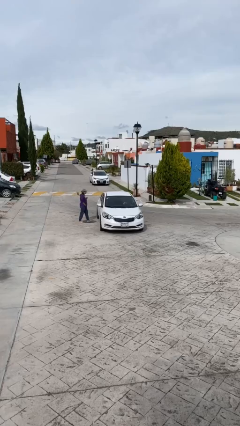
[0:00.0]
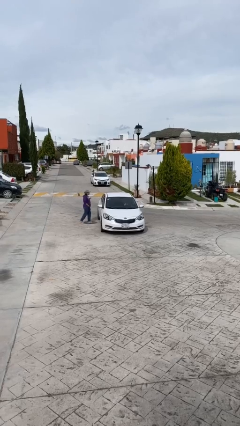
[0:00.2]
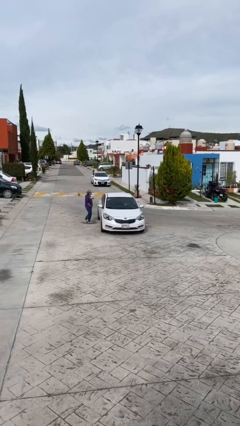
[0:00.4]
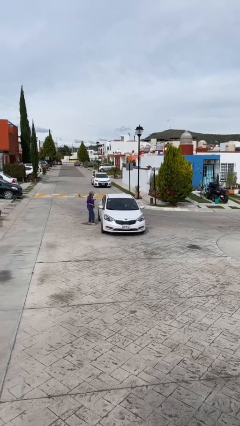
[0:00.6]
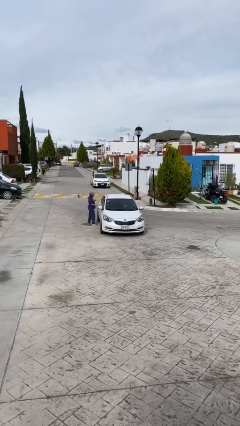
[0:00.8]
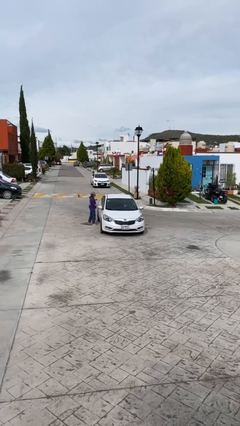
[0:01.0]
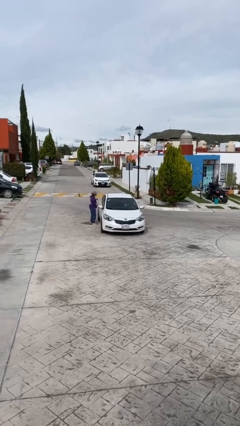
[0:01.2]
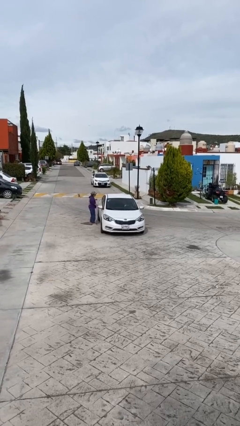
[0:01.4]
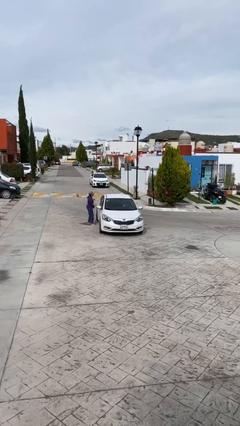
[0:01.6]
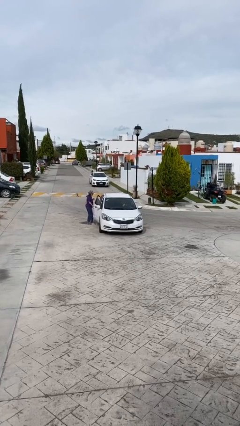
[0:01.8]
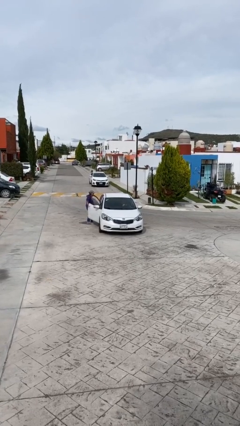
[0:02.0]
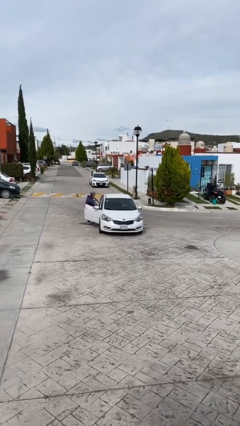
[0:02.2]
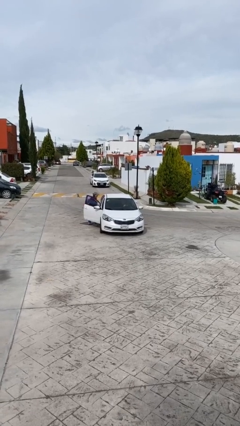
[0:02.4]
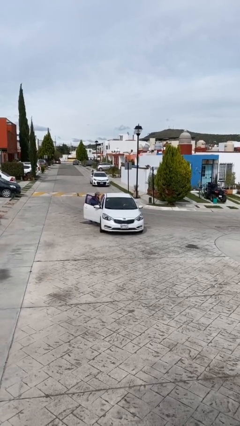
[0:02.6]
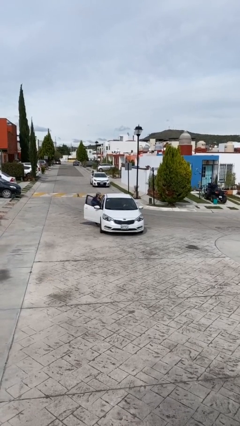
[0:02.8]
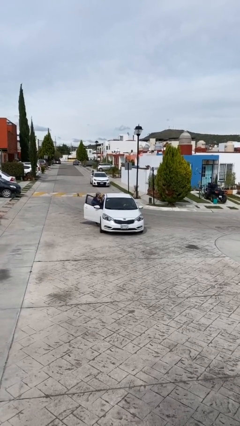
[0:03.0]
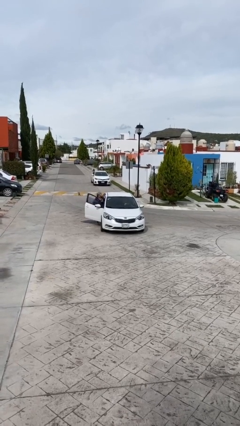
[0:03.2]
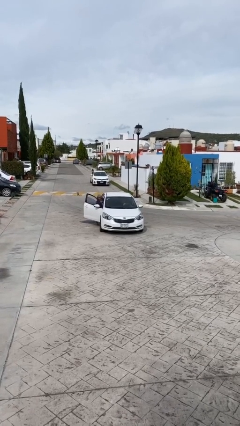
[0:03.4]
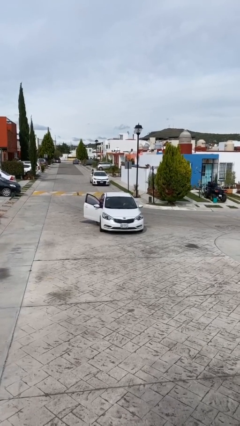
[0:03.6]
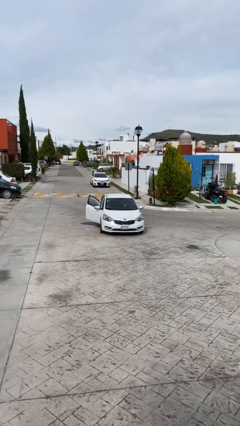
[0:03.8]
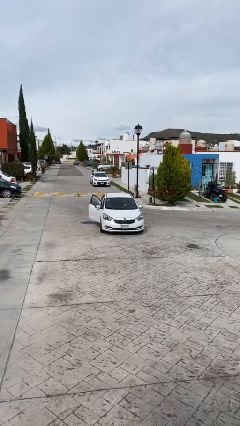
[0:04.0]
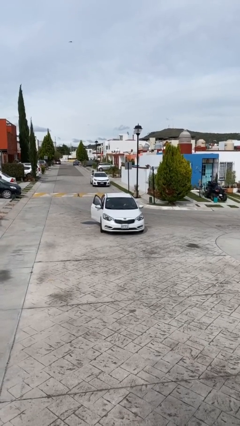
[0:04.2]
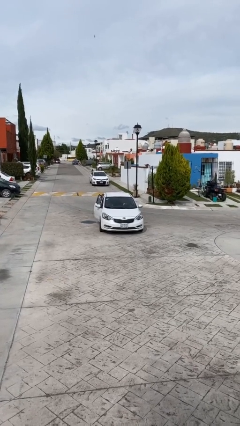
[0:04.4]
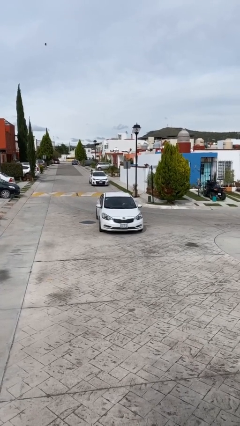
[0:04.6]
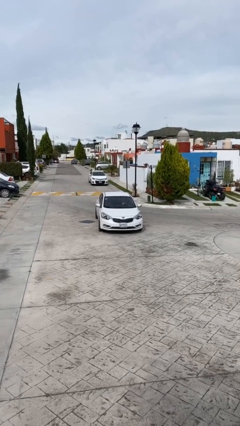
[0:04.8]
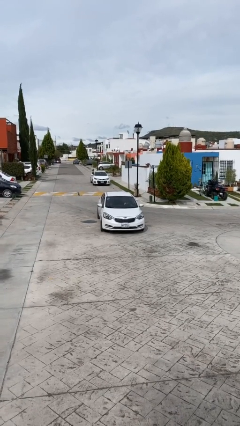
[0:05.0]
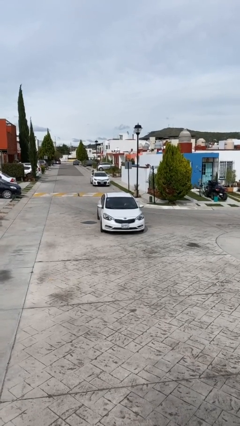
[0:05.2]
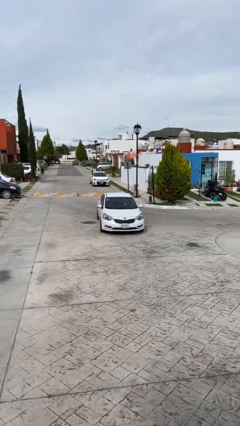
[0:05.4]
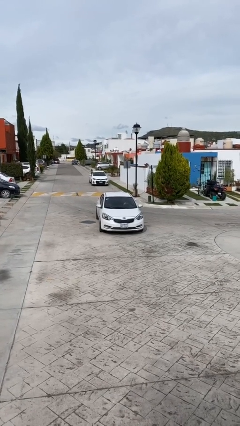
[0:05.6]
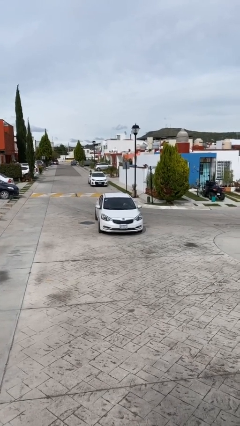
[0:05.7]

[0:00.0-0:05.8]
car picks up person

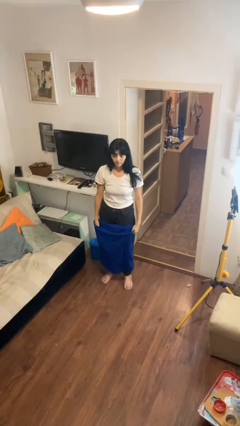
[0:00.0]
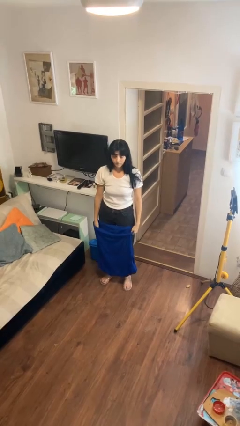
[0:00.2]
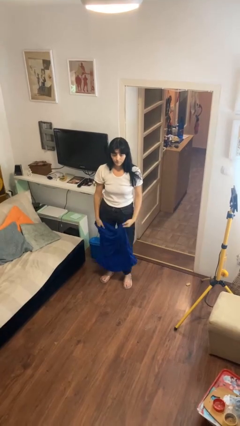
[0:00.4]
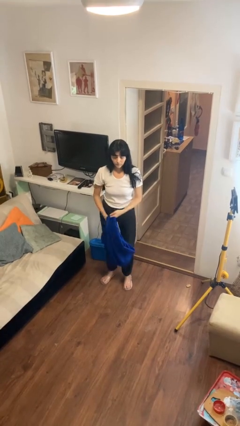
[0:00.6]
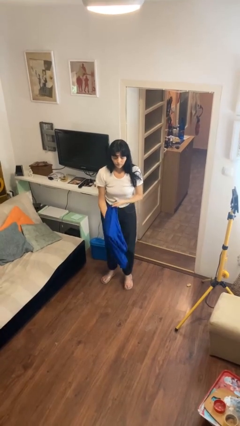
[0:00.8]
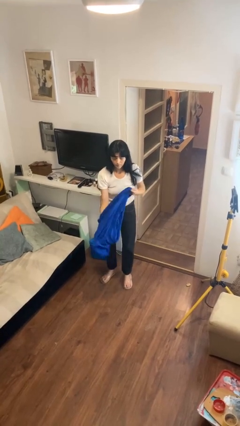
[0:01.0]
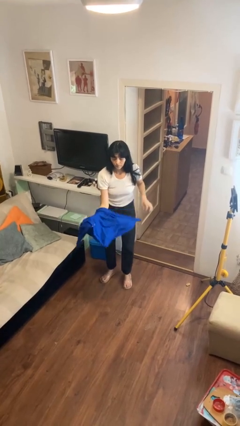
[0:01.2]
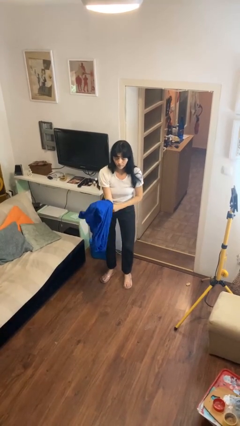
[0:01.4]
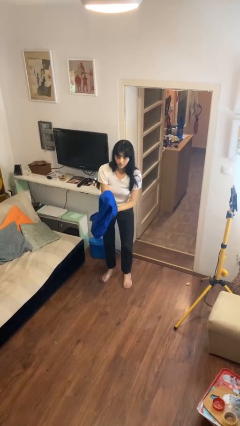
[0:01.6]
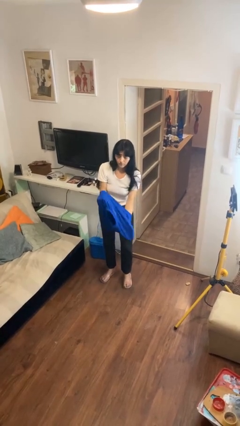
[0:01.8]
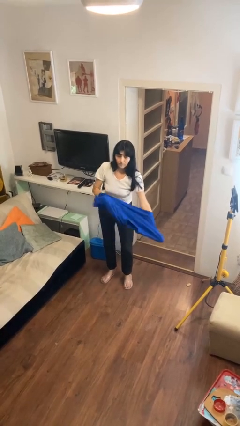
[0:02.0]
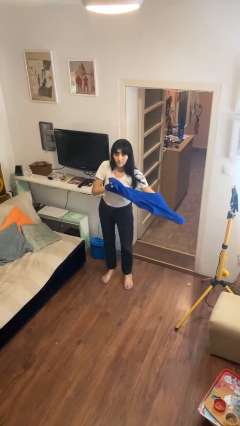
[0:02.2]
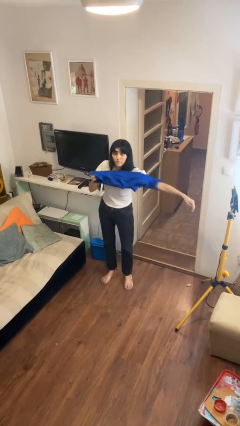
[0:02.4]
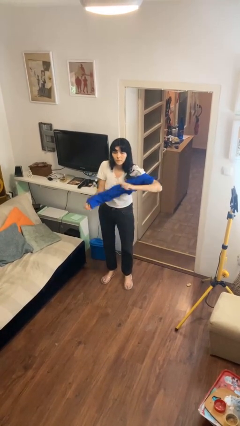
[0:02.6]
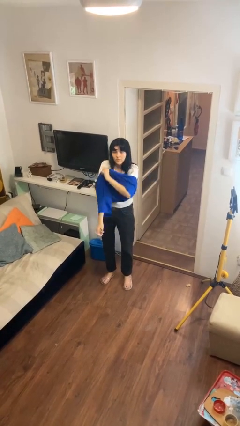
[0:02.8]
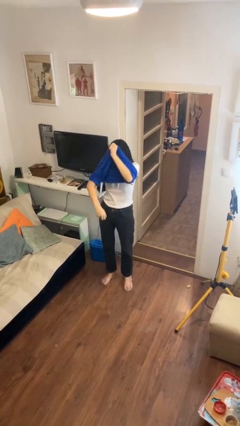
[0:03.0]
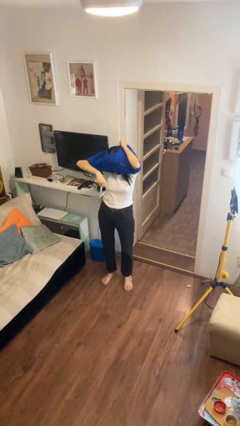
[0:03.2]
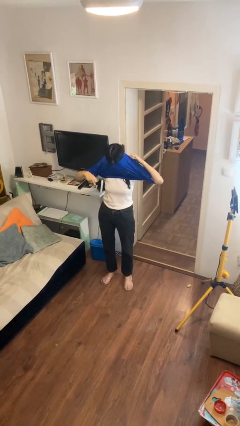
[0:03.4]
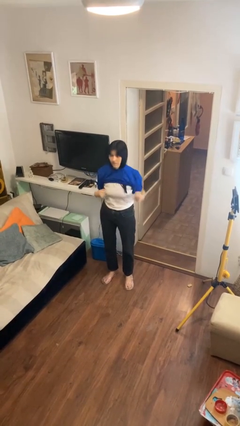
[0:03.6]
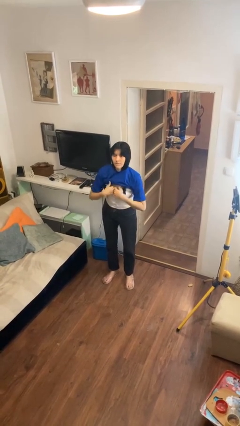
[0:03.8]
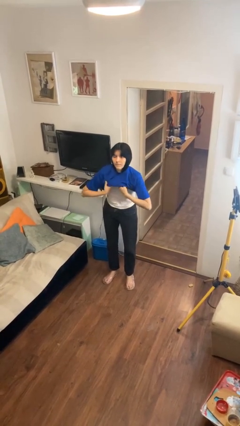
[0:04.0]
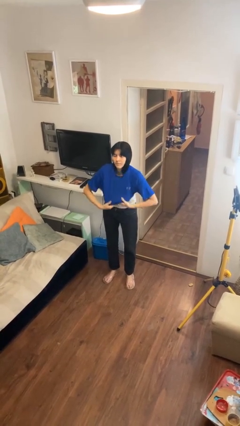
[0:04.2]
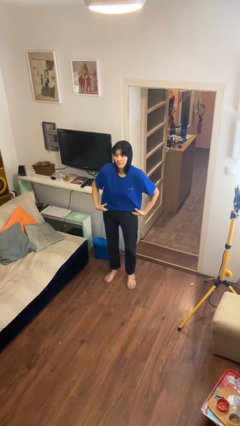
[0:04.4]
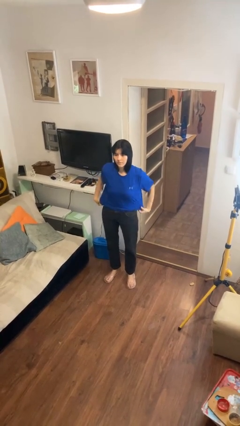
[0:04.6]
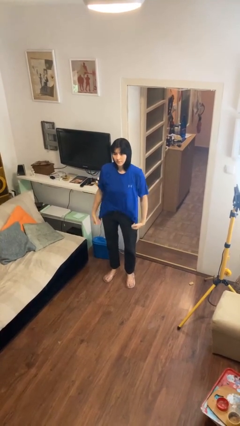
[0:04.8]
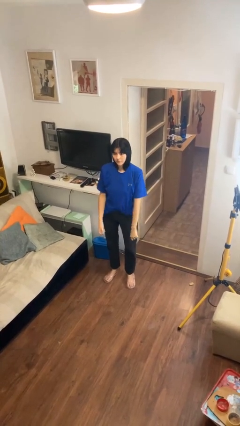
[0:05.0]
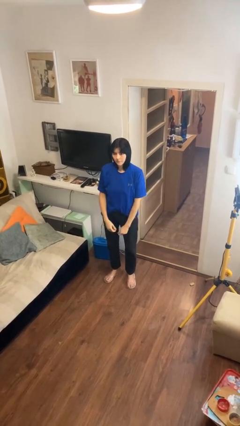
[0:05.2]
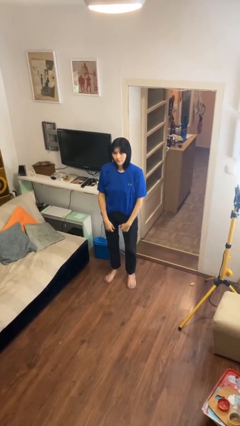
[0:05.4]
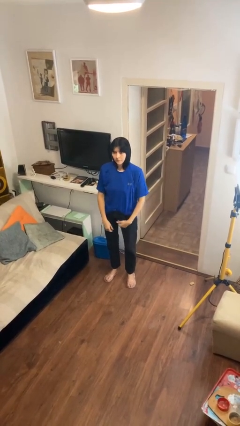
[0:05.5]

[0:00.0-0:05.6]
person puts on shirt

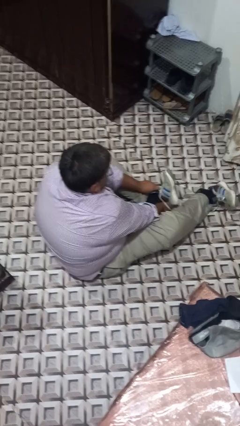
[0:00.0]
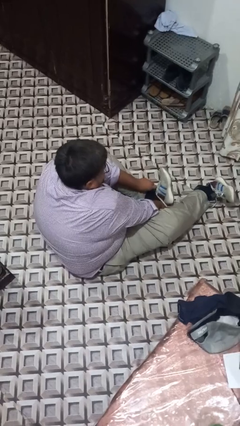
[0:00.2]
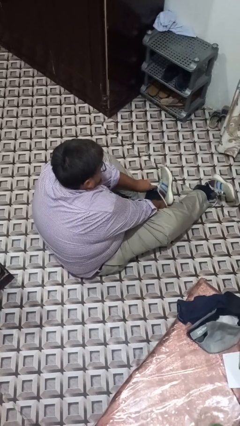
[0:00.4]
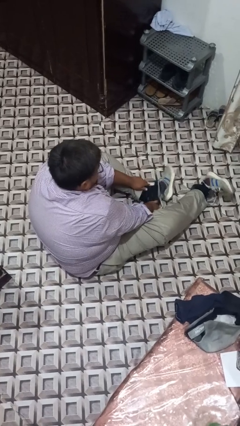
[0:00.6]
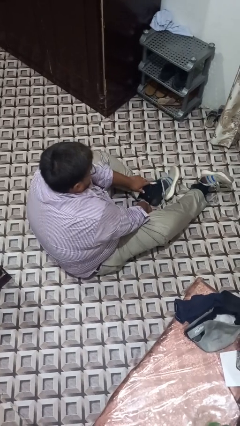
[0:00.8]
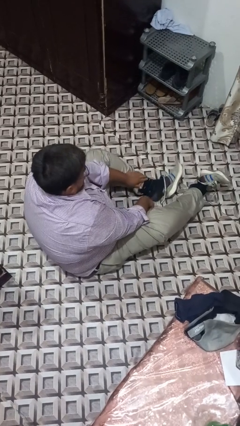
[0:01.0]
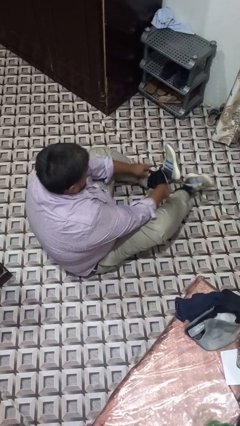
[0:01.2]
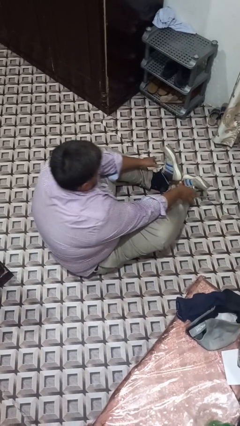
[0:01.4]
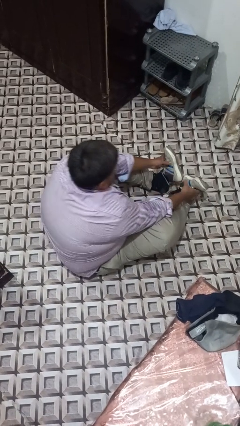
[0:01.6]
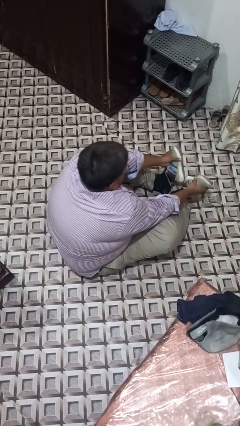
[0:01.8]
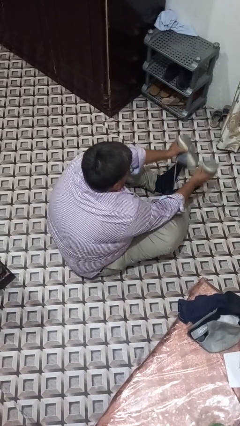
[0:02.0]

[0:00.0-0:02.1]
person takes off shoes

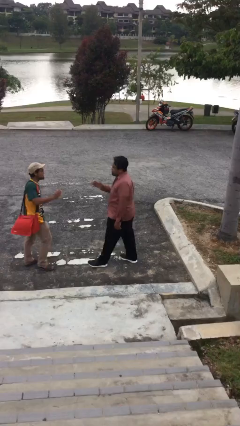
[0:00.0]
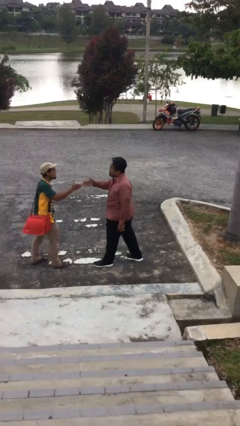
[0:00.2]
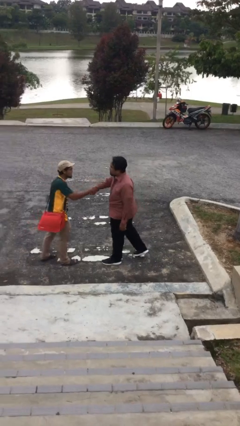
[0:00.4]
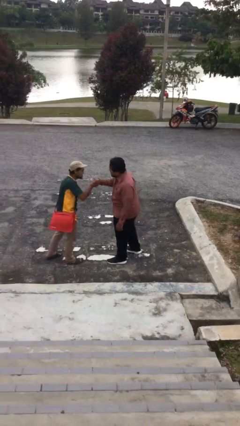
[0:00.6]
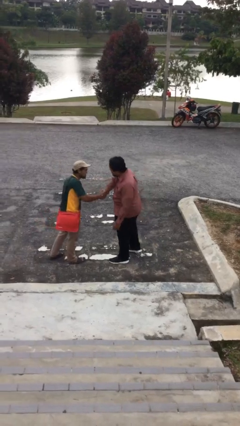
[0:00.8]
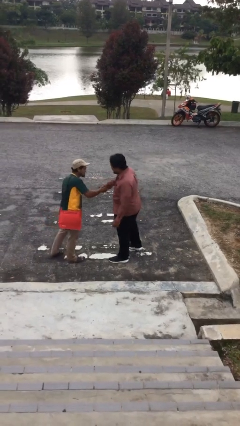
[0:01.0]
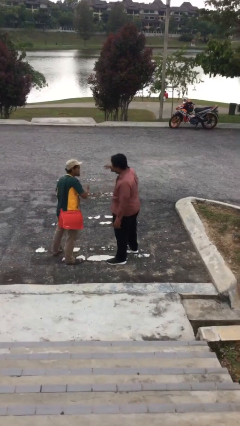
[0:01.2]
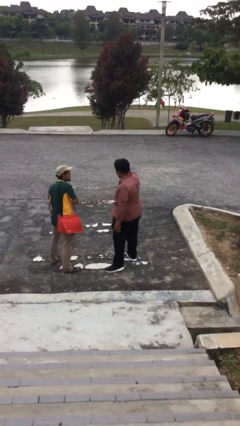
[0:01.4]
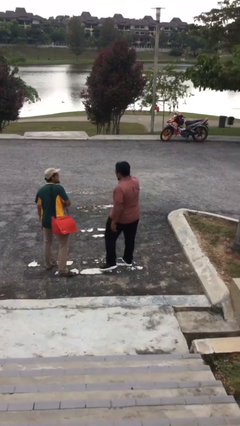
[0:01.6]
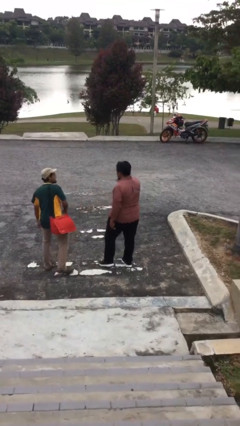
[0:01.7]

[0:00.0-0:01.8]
person shakes hand

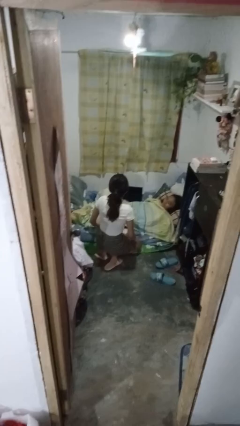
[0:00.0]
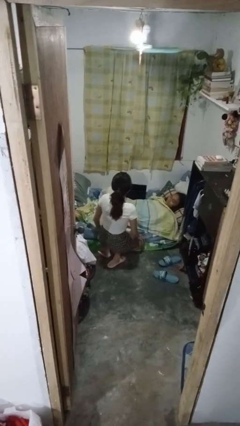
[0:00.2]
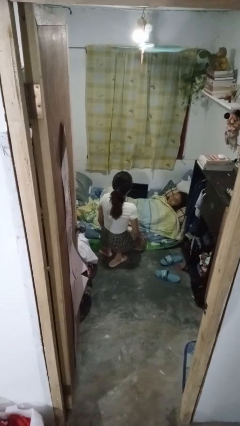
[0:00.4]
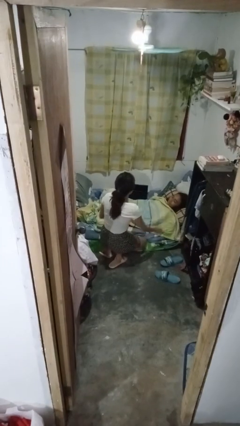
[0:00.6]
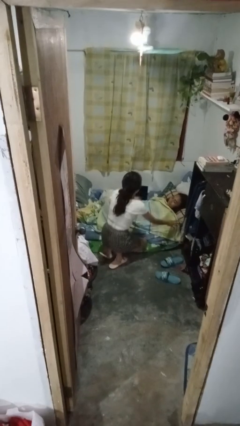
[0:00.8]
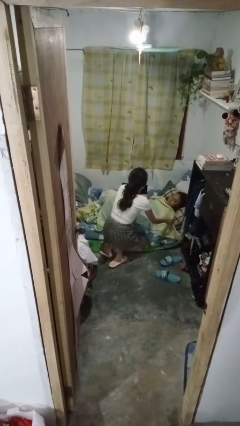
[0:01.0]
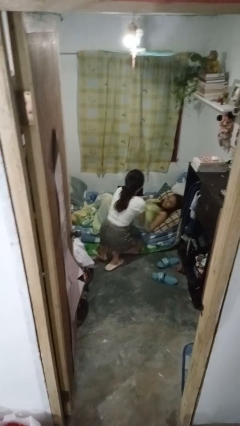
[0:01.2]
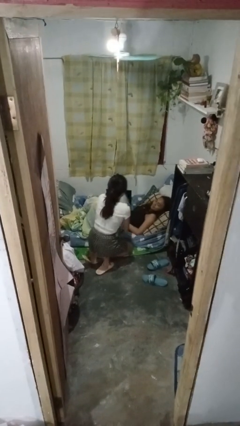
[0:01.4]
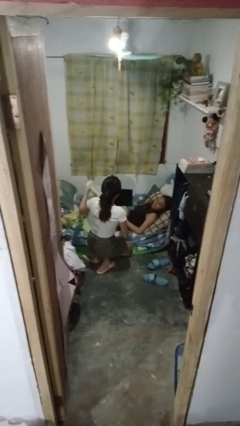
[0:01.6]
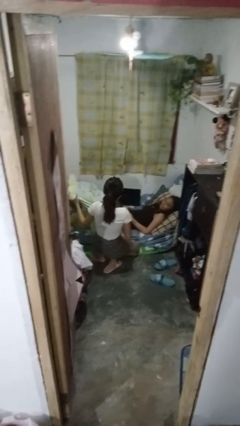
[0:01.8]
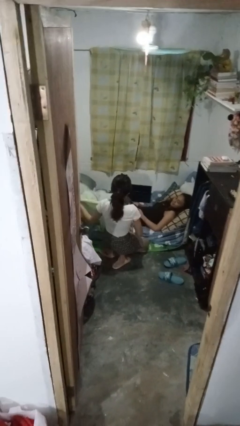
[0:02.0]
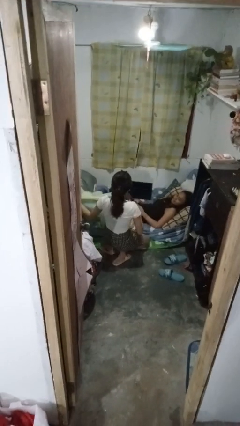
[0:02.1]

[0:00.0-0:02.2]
person uncovers friend with blanket
